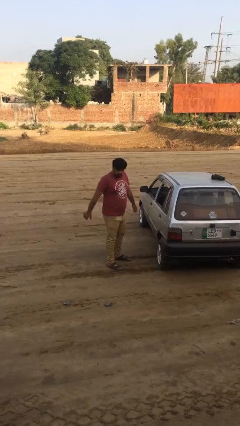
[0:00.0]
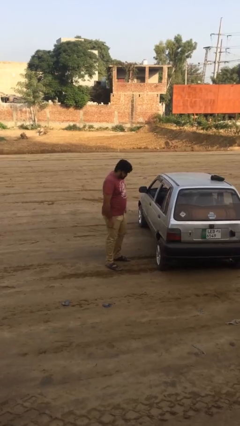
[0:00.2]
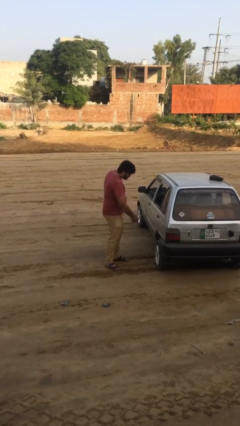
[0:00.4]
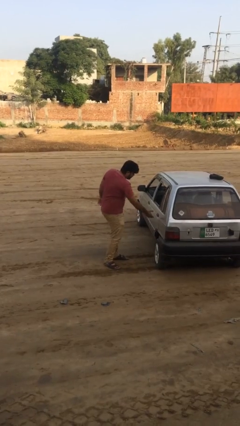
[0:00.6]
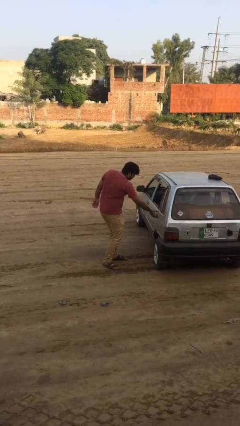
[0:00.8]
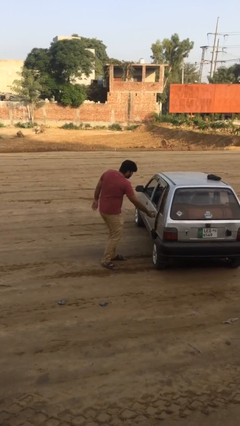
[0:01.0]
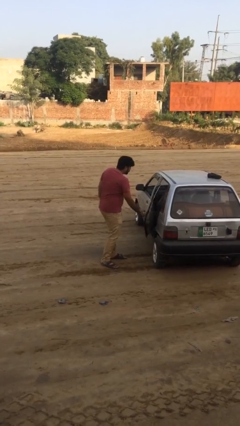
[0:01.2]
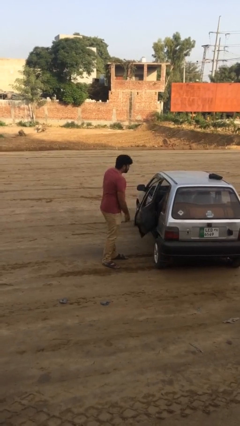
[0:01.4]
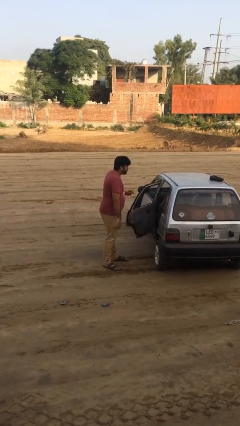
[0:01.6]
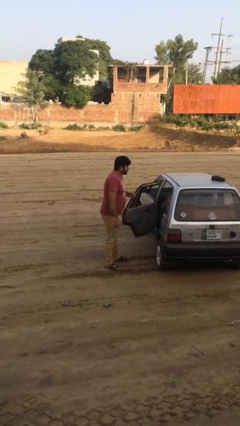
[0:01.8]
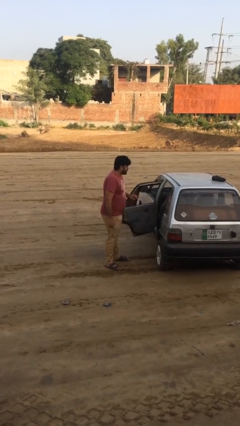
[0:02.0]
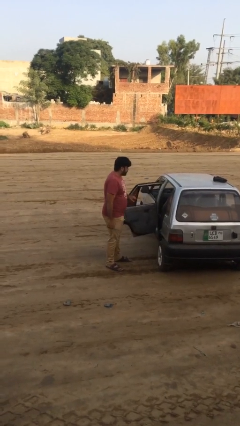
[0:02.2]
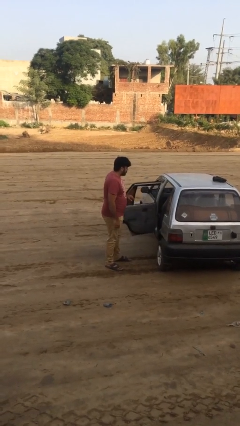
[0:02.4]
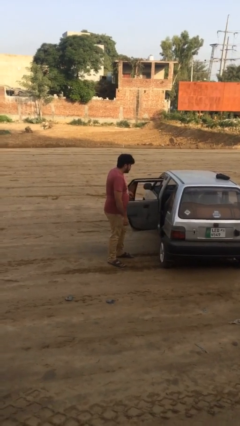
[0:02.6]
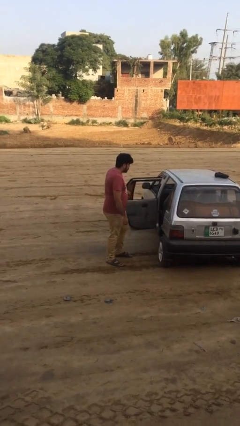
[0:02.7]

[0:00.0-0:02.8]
person opens car door

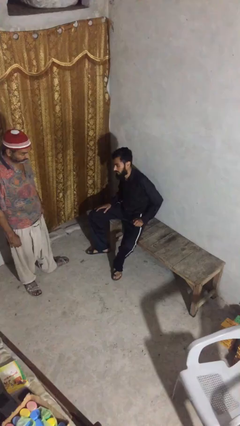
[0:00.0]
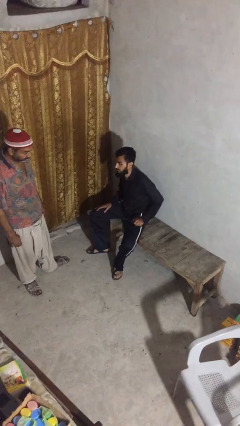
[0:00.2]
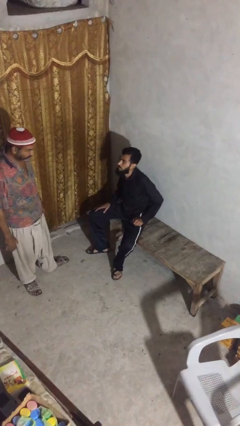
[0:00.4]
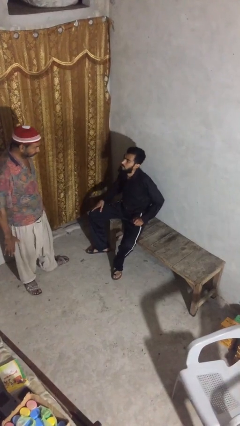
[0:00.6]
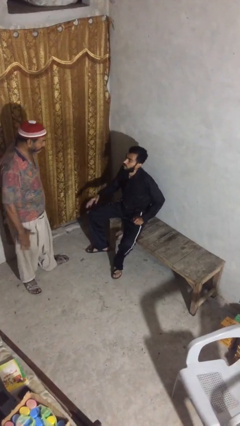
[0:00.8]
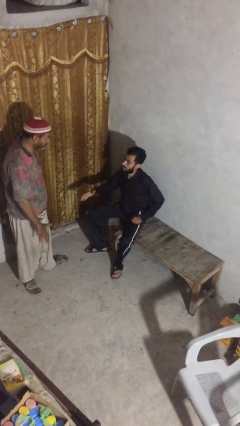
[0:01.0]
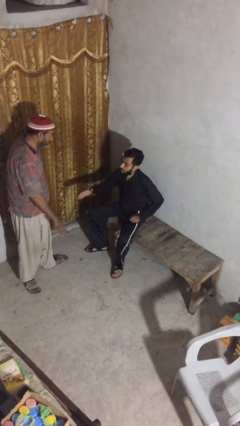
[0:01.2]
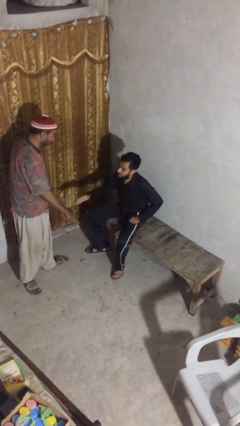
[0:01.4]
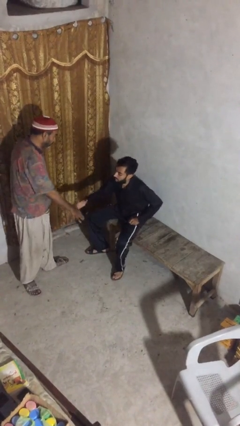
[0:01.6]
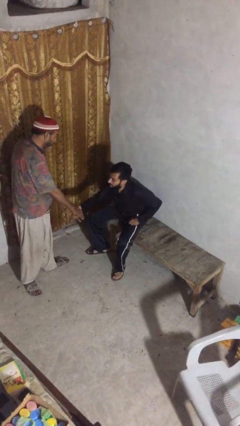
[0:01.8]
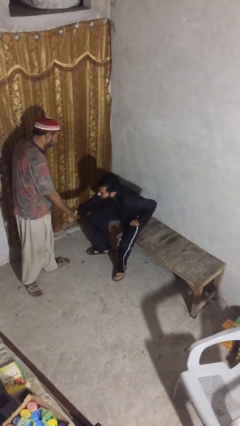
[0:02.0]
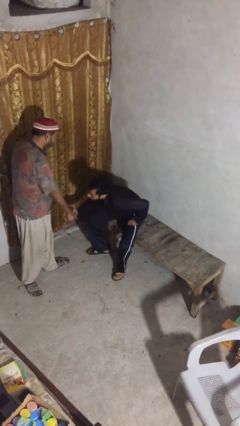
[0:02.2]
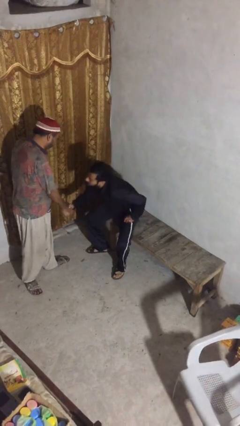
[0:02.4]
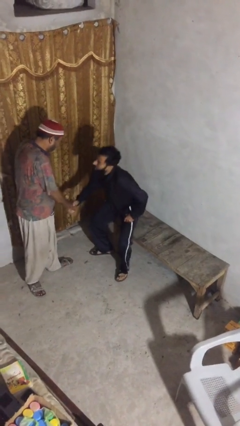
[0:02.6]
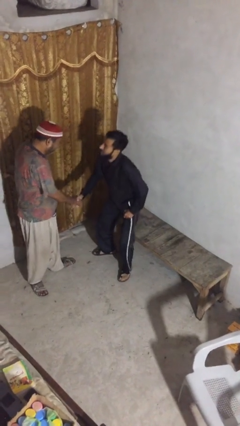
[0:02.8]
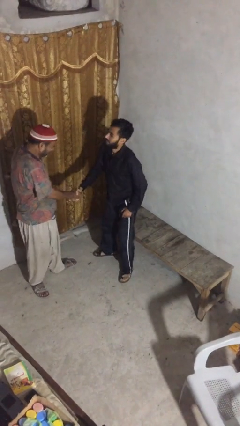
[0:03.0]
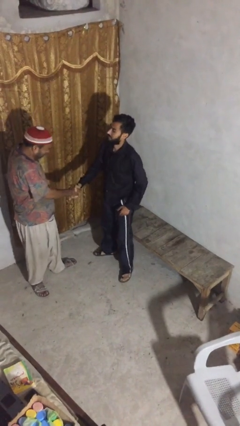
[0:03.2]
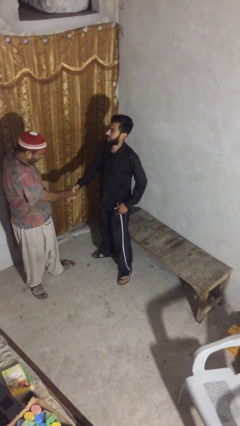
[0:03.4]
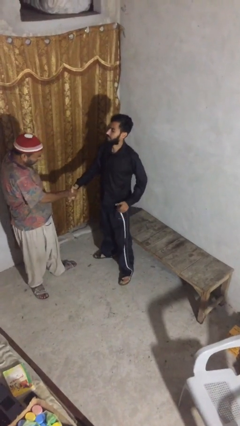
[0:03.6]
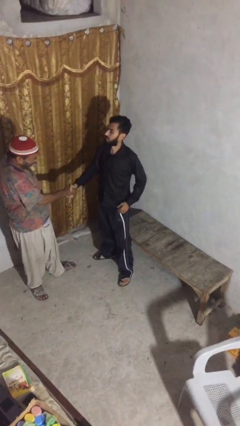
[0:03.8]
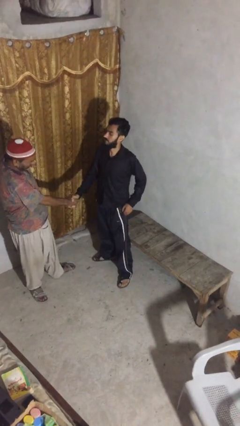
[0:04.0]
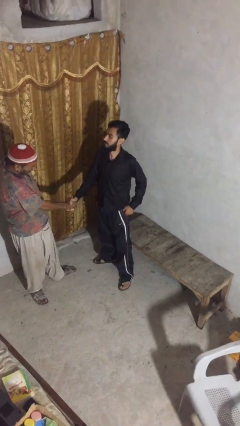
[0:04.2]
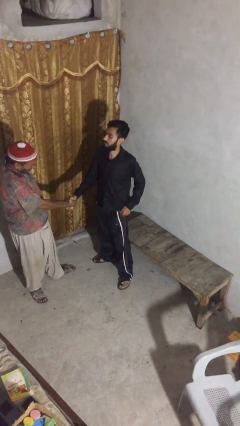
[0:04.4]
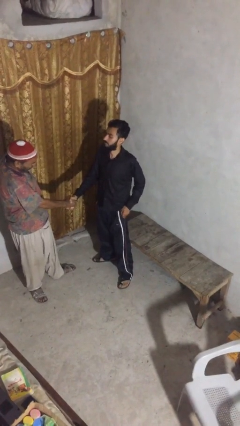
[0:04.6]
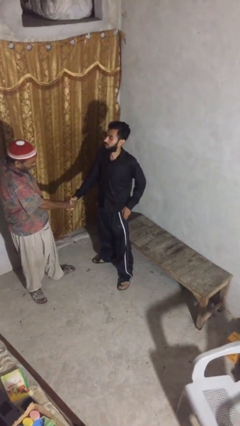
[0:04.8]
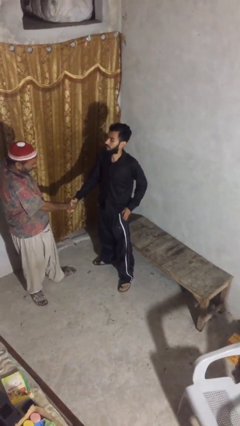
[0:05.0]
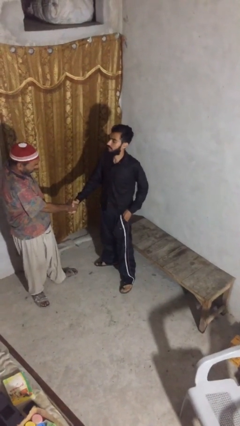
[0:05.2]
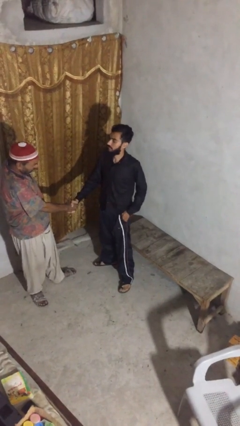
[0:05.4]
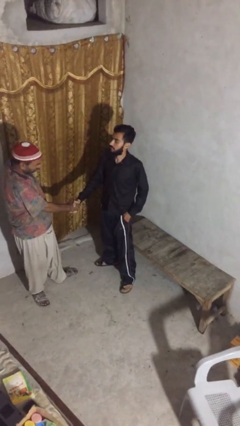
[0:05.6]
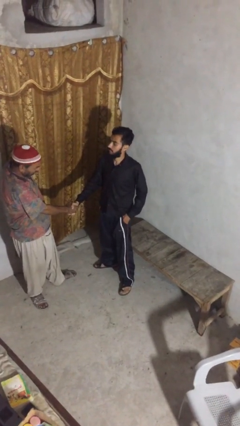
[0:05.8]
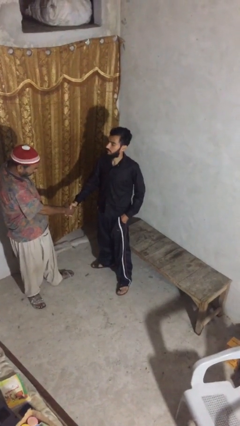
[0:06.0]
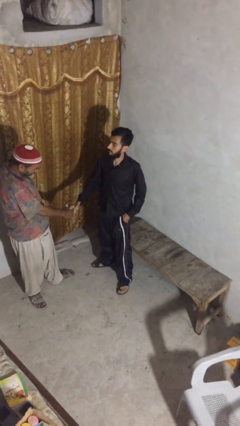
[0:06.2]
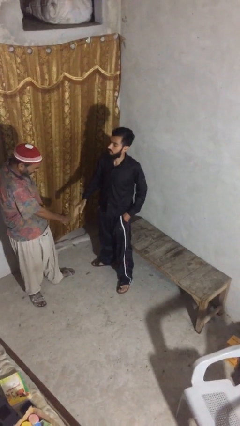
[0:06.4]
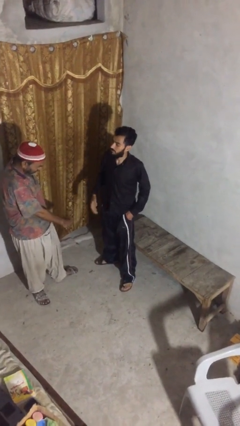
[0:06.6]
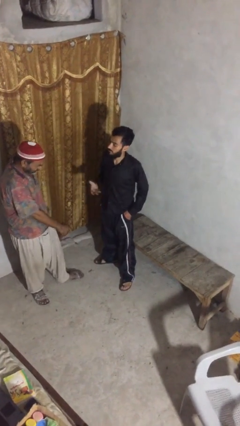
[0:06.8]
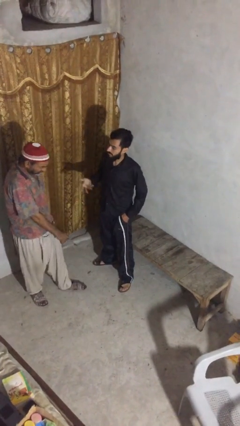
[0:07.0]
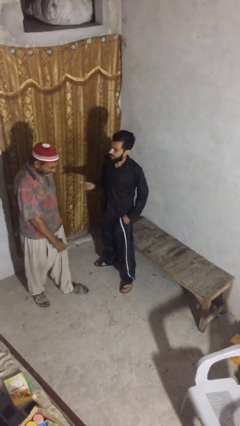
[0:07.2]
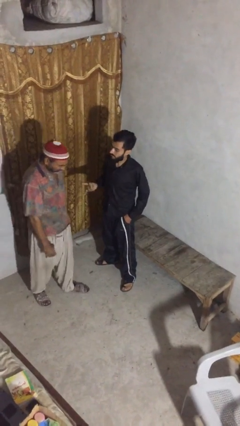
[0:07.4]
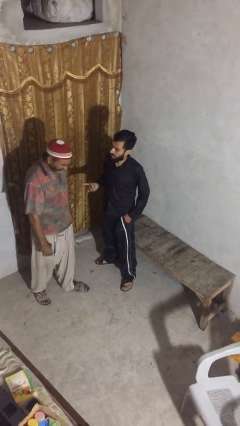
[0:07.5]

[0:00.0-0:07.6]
person shakes hand

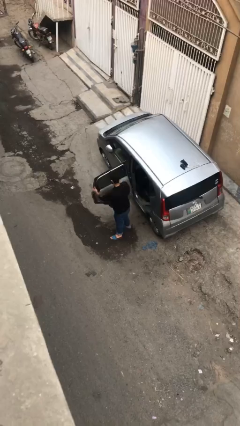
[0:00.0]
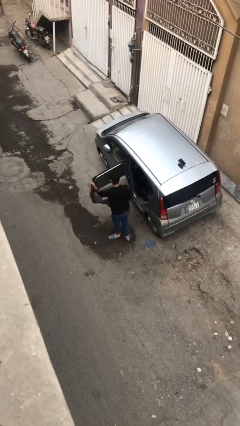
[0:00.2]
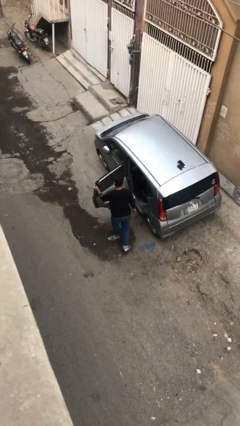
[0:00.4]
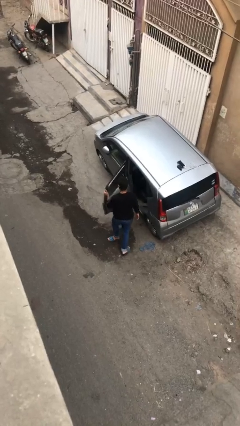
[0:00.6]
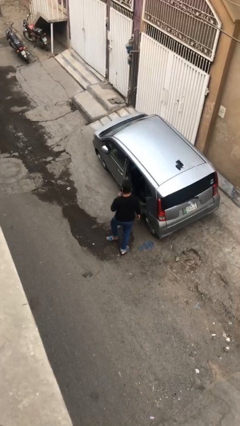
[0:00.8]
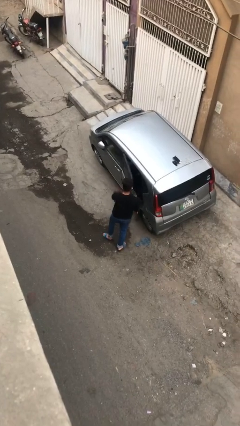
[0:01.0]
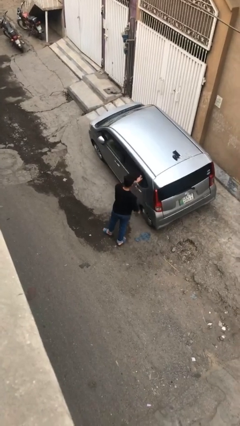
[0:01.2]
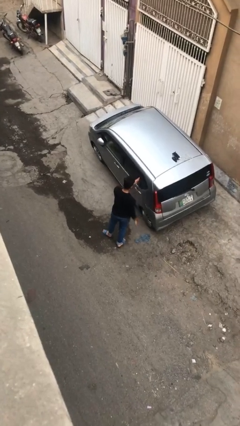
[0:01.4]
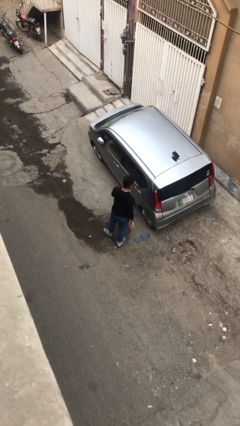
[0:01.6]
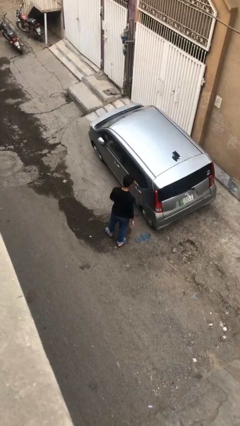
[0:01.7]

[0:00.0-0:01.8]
person closes car door

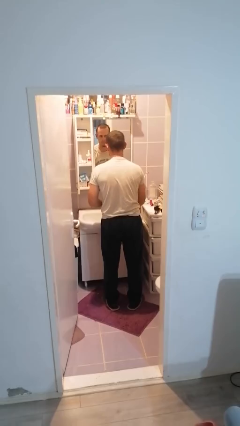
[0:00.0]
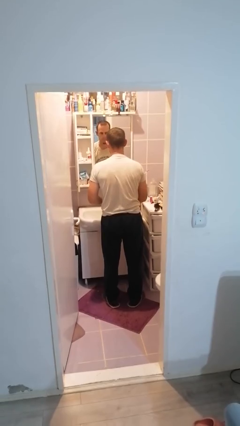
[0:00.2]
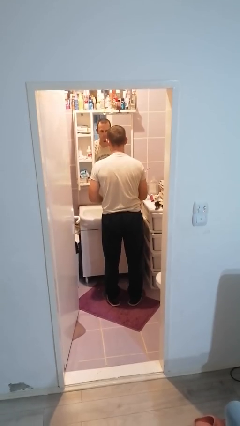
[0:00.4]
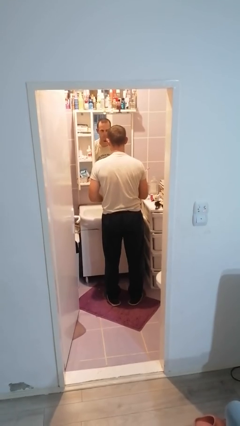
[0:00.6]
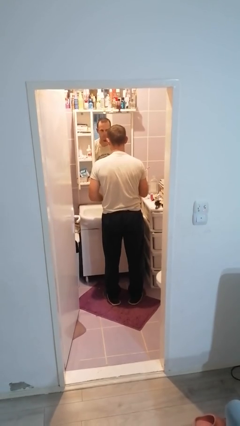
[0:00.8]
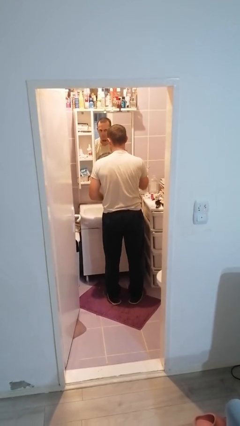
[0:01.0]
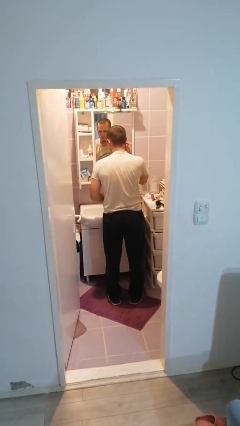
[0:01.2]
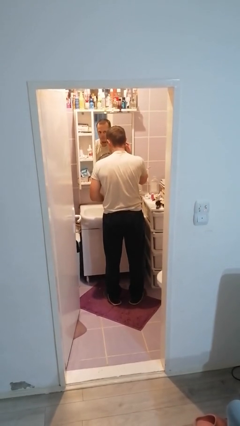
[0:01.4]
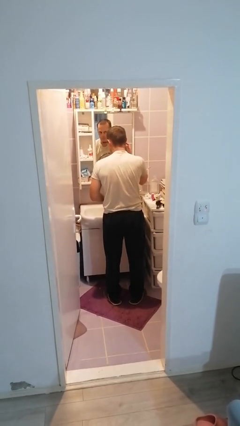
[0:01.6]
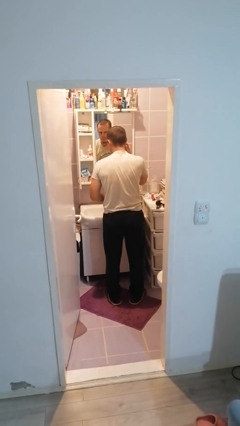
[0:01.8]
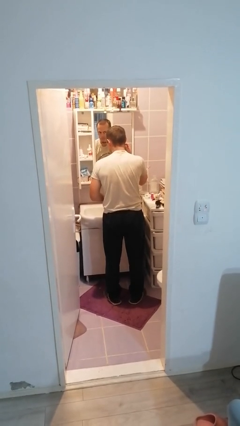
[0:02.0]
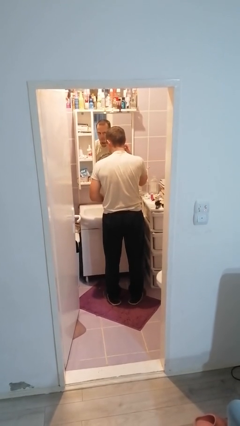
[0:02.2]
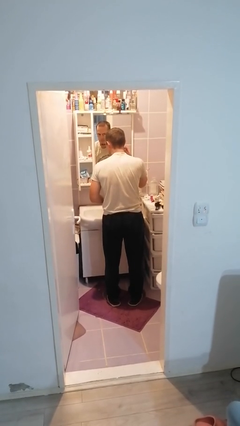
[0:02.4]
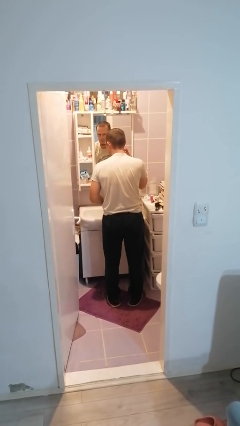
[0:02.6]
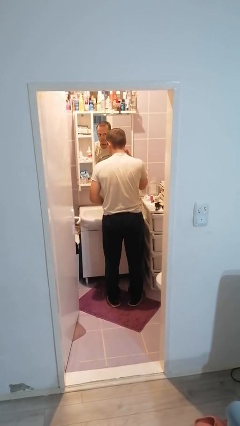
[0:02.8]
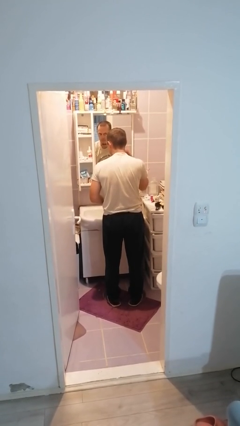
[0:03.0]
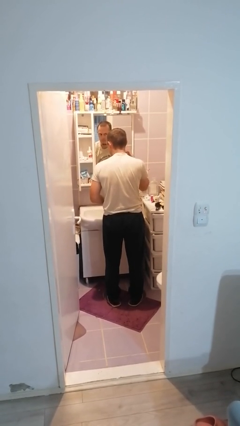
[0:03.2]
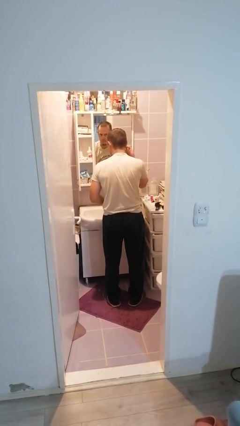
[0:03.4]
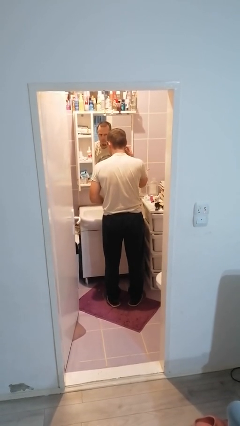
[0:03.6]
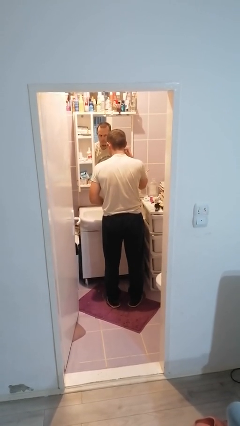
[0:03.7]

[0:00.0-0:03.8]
person shaves face

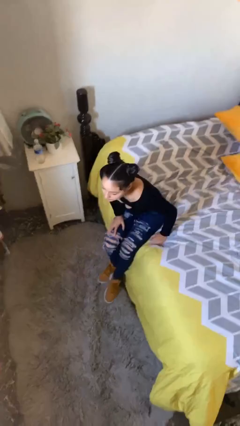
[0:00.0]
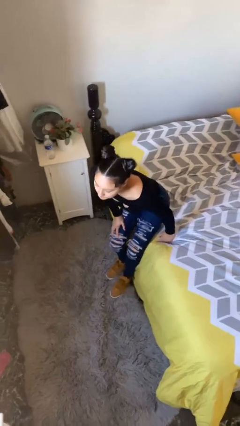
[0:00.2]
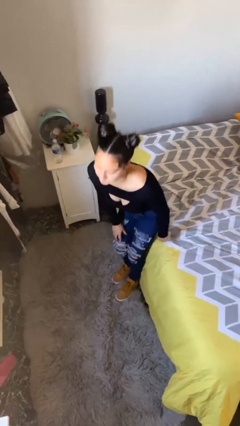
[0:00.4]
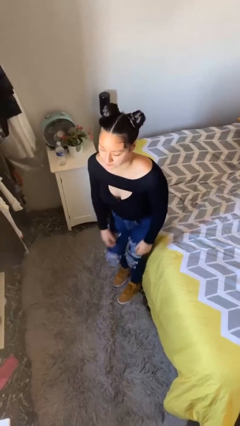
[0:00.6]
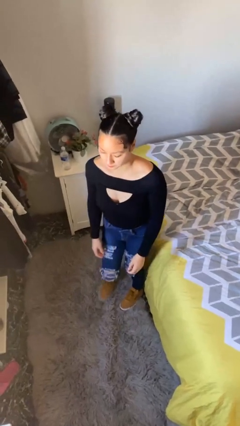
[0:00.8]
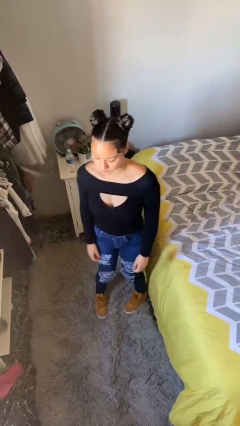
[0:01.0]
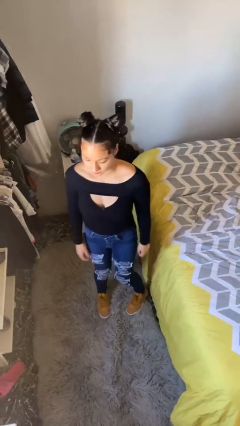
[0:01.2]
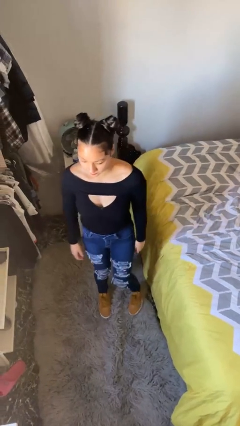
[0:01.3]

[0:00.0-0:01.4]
person stands up
